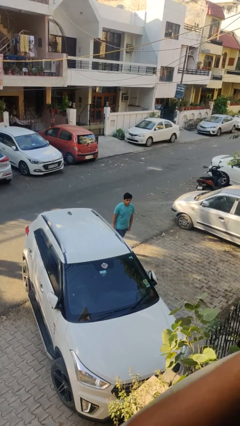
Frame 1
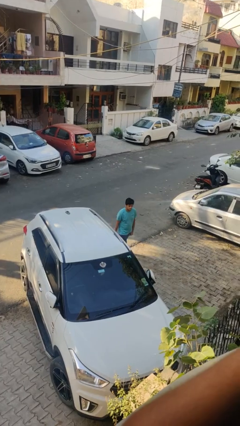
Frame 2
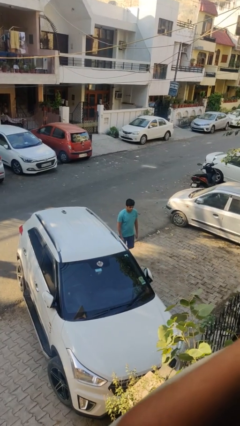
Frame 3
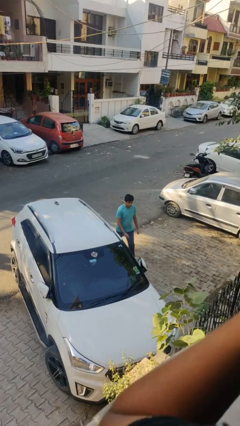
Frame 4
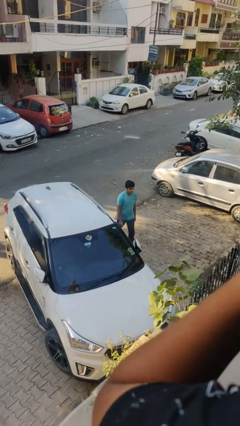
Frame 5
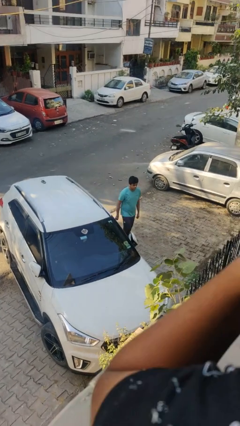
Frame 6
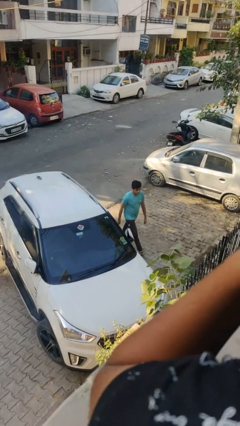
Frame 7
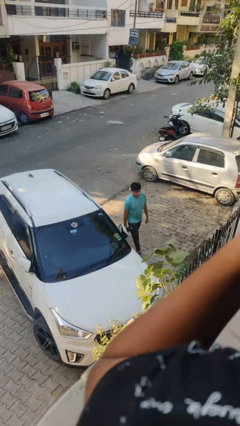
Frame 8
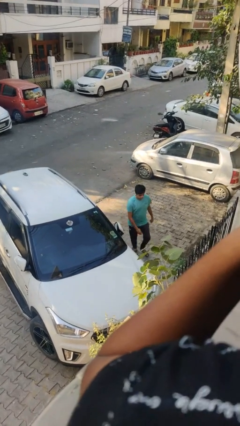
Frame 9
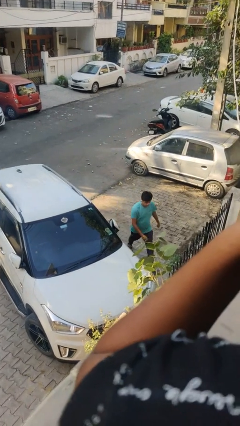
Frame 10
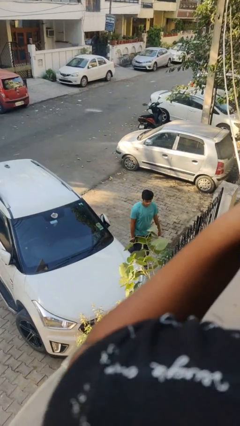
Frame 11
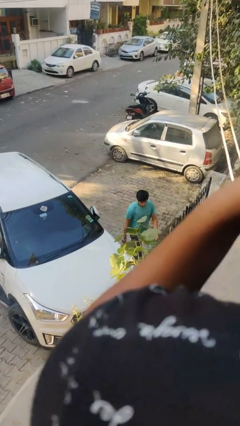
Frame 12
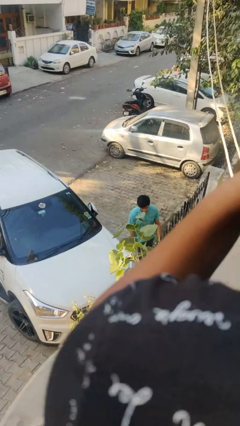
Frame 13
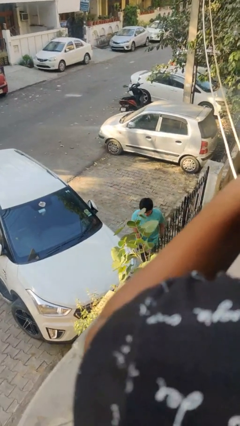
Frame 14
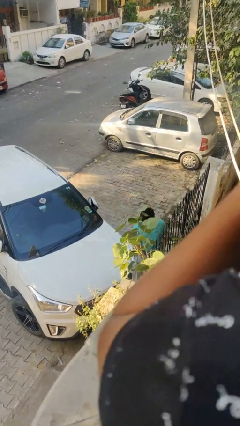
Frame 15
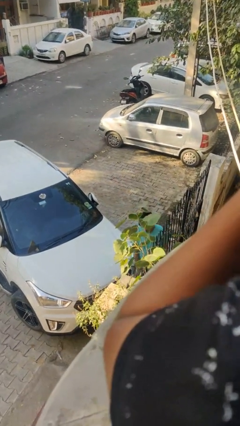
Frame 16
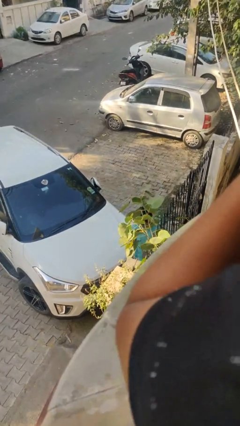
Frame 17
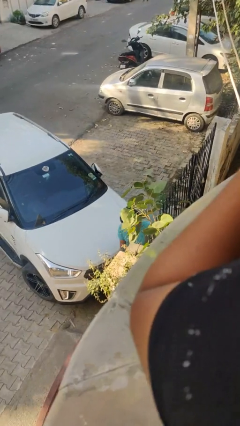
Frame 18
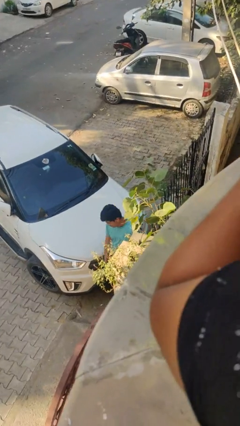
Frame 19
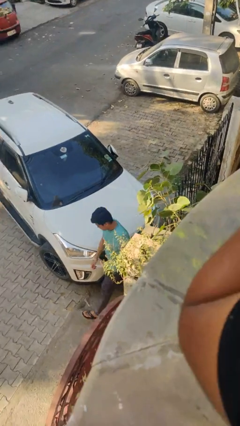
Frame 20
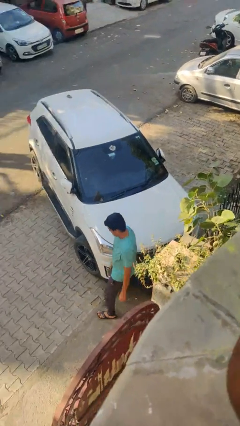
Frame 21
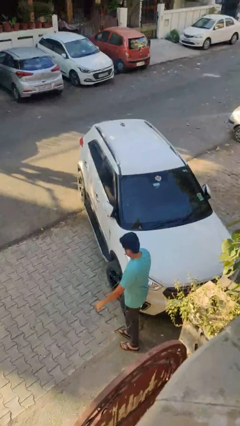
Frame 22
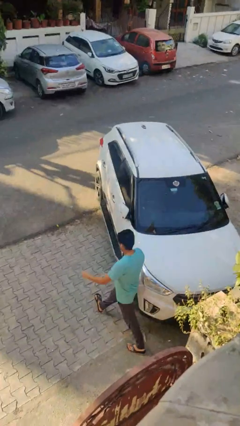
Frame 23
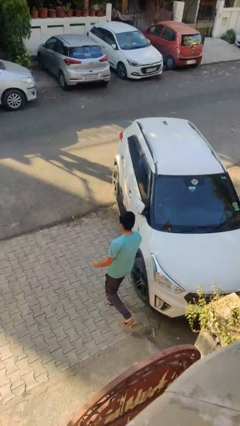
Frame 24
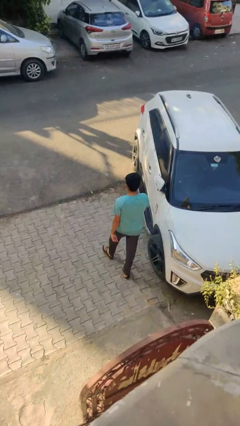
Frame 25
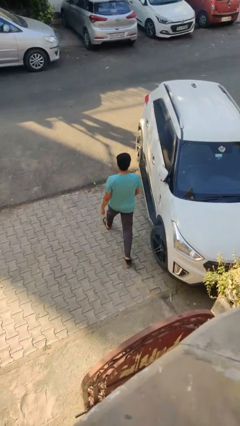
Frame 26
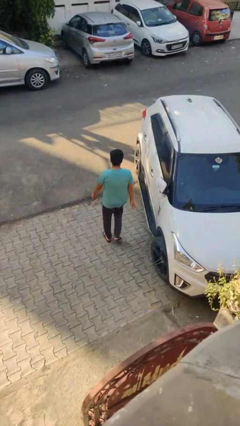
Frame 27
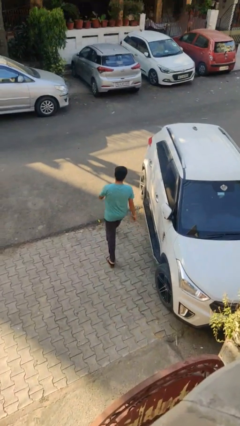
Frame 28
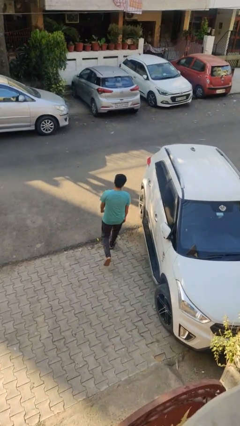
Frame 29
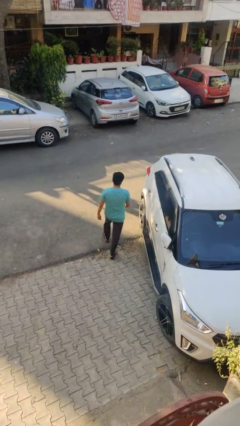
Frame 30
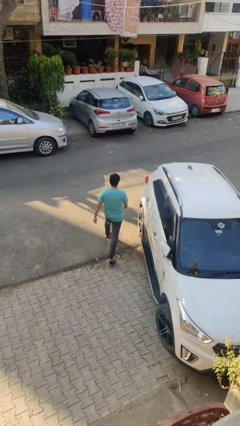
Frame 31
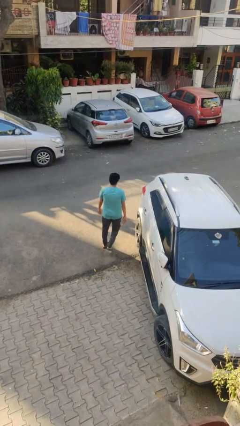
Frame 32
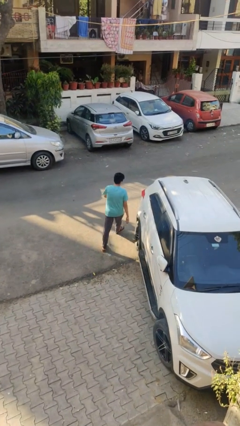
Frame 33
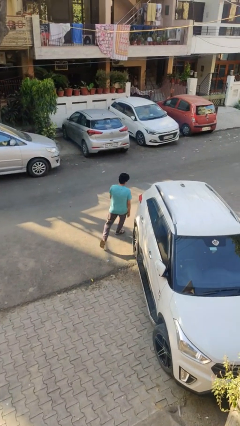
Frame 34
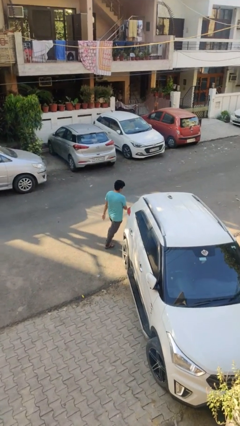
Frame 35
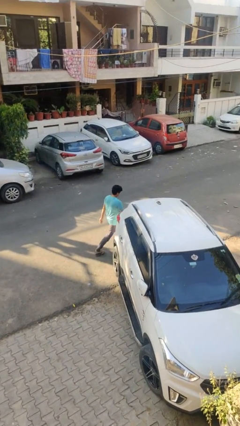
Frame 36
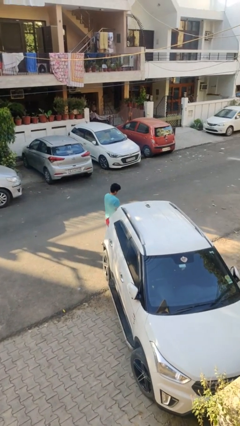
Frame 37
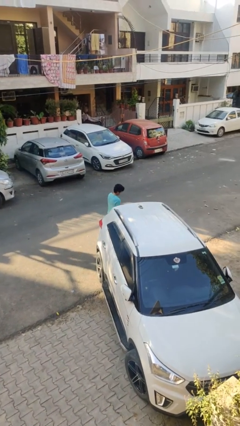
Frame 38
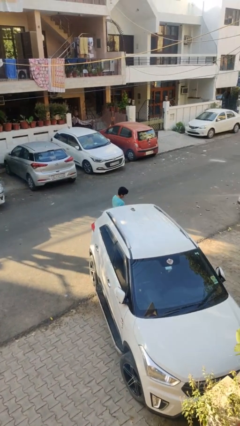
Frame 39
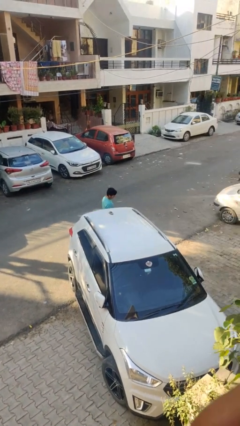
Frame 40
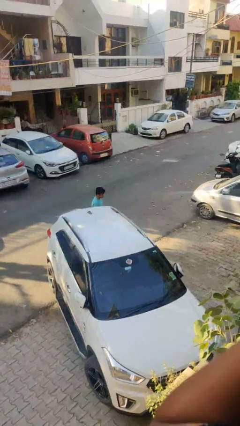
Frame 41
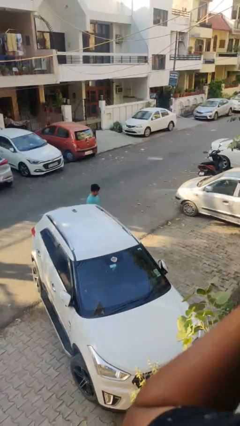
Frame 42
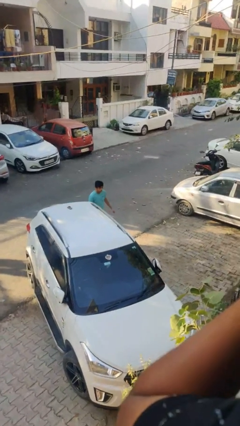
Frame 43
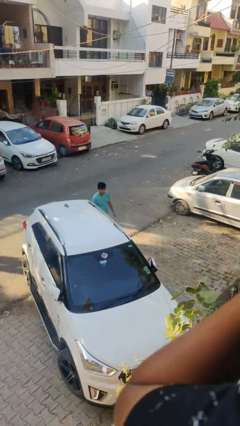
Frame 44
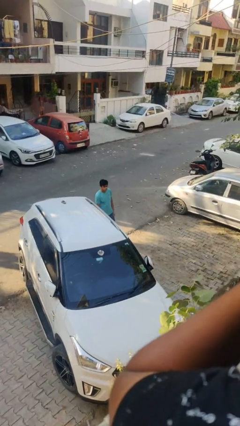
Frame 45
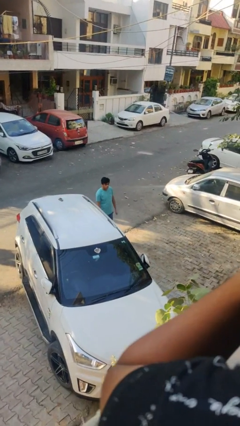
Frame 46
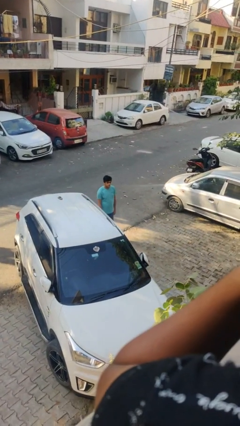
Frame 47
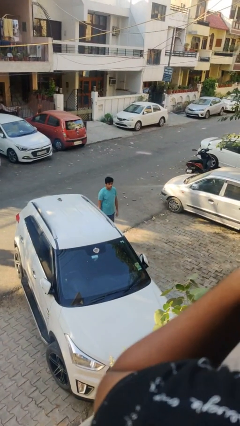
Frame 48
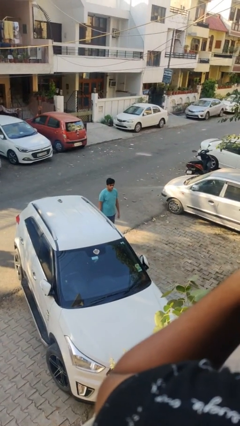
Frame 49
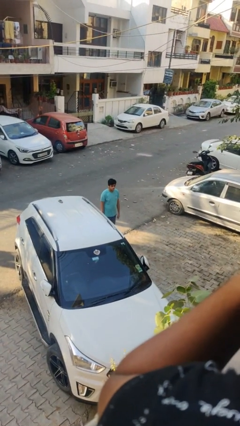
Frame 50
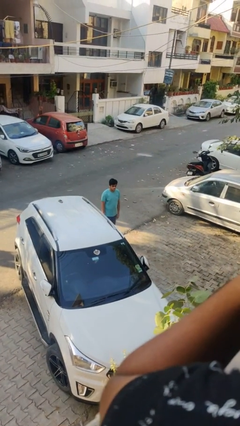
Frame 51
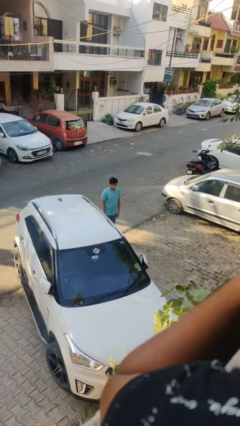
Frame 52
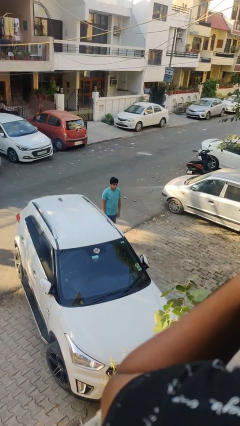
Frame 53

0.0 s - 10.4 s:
person walks around car

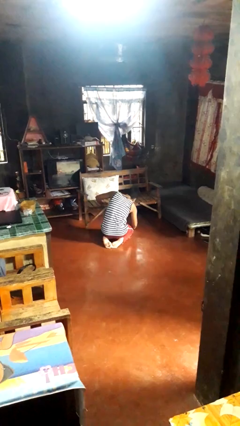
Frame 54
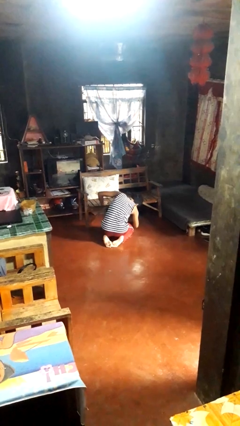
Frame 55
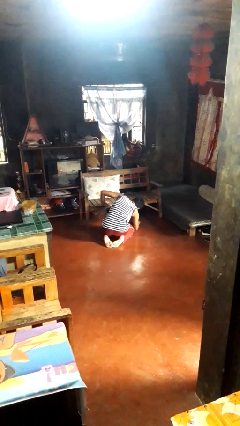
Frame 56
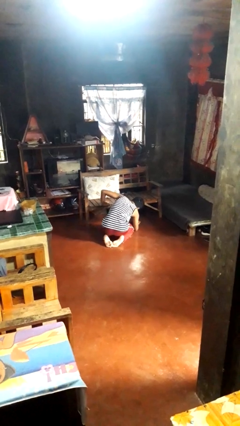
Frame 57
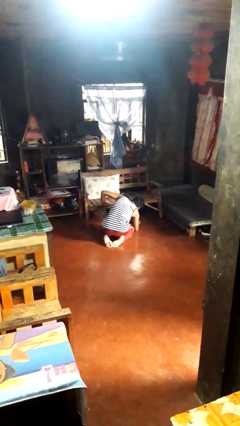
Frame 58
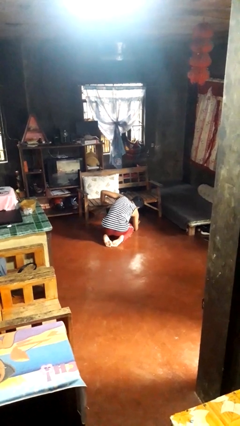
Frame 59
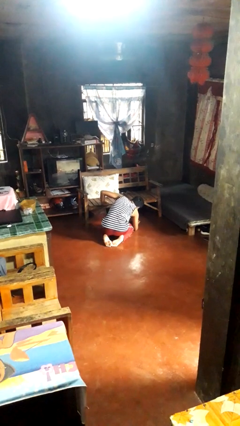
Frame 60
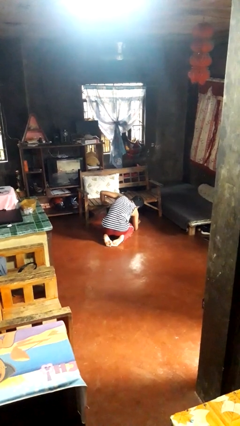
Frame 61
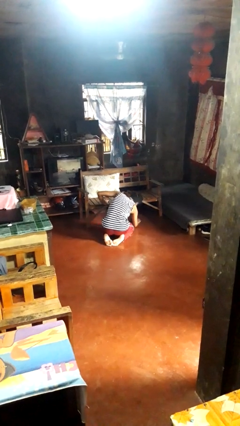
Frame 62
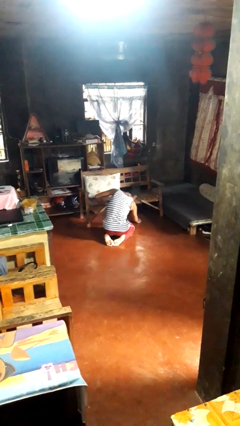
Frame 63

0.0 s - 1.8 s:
person searches under couch

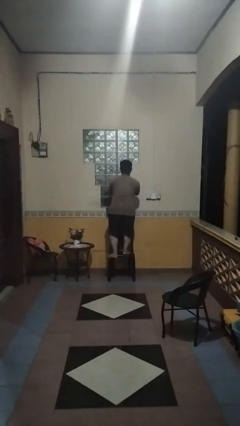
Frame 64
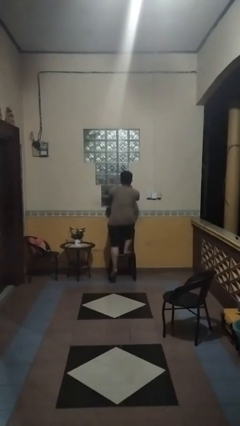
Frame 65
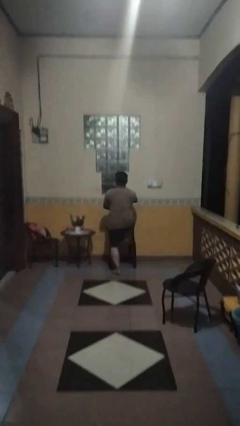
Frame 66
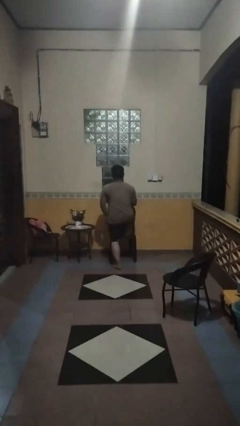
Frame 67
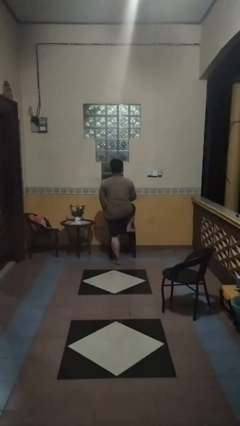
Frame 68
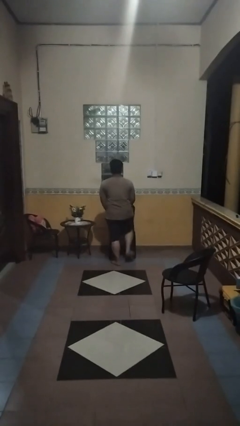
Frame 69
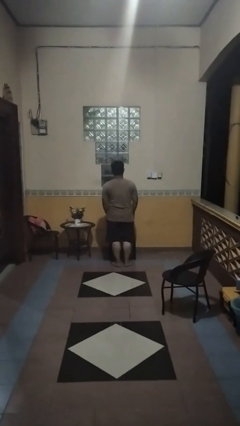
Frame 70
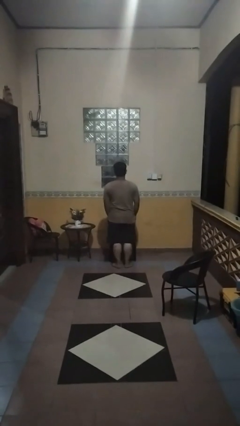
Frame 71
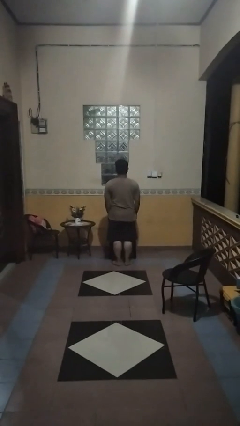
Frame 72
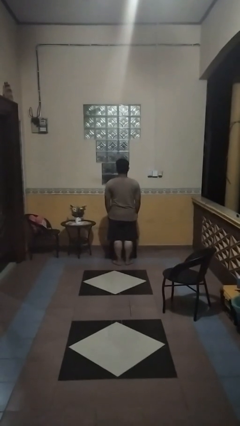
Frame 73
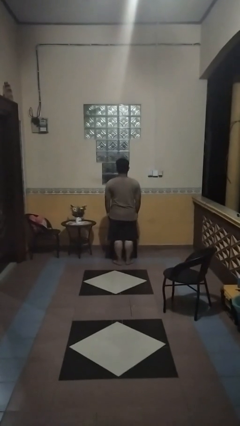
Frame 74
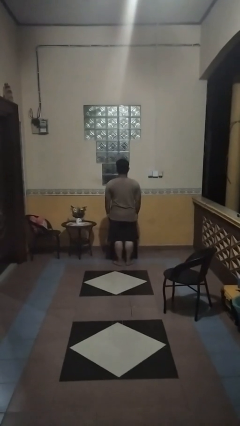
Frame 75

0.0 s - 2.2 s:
person climbs off chair

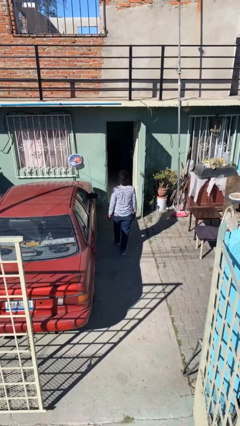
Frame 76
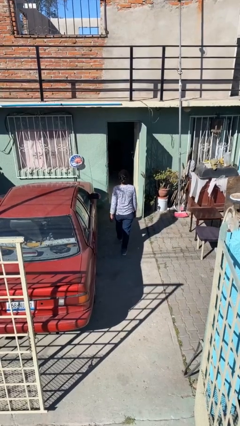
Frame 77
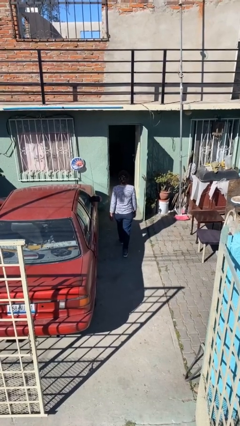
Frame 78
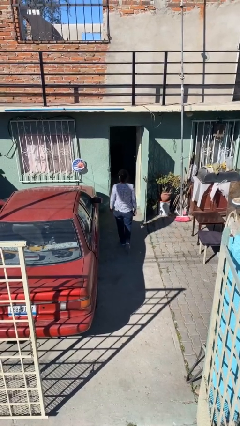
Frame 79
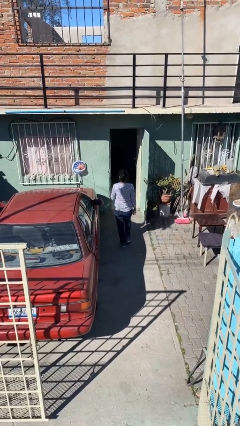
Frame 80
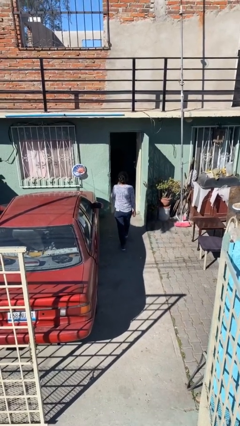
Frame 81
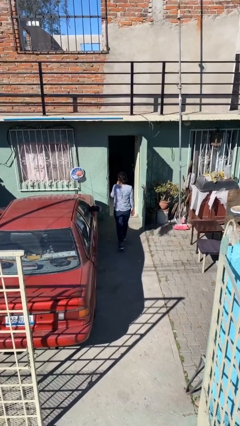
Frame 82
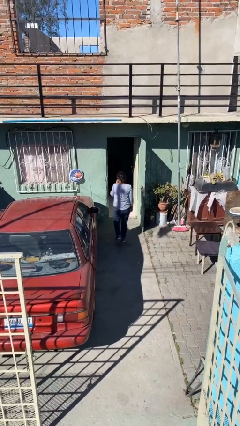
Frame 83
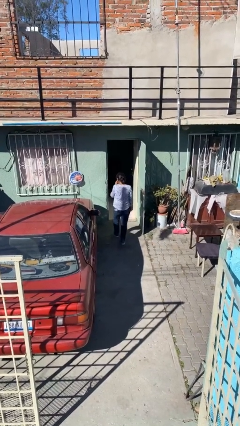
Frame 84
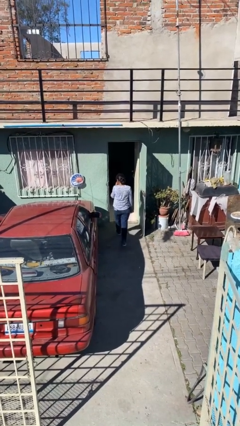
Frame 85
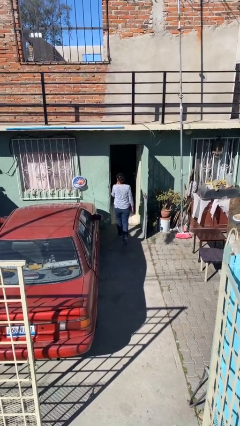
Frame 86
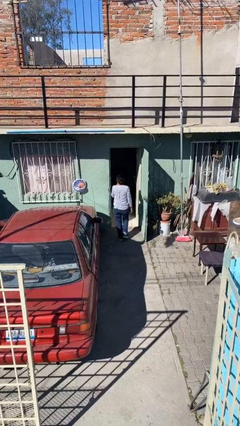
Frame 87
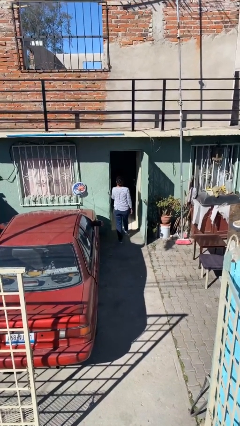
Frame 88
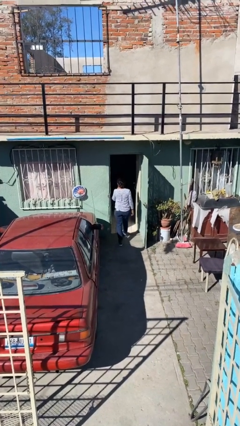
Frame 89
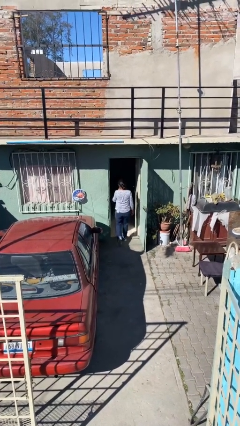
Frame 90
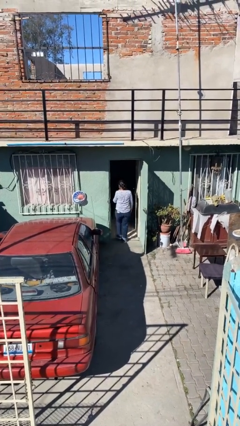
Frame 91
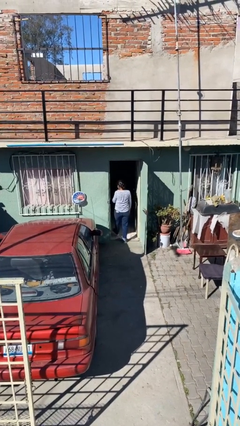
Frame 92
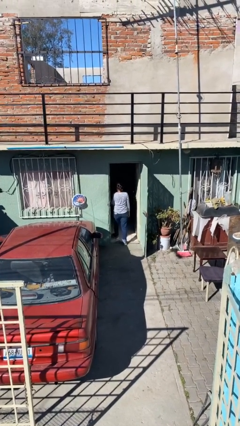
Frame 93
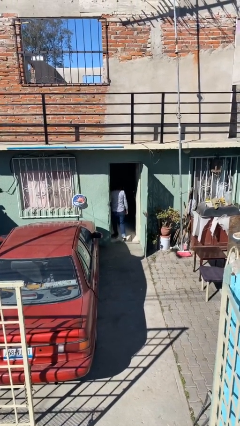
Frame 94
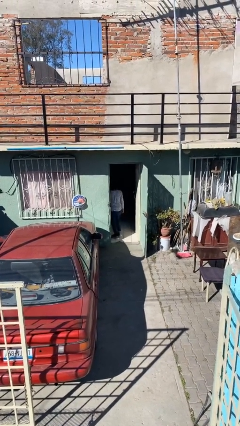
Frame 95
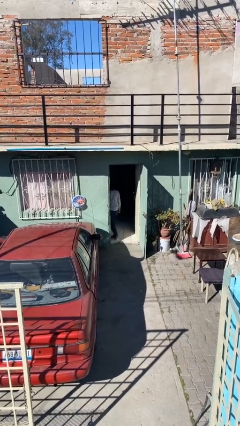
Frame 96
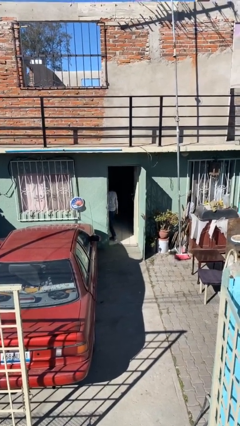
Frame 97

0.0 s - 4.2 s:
person exits scene through structure
